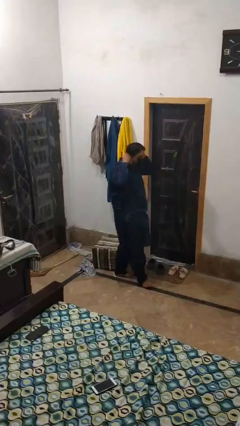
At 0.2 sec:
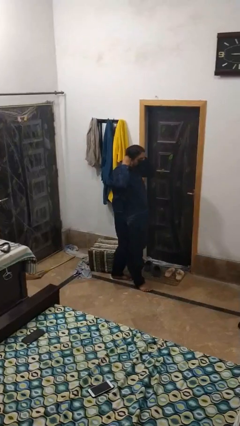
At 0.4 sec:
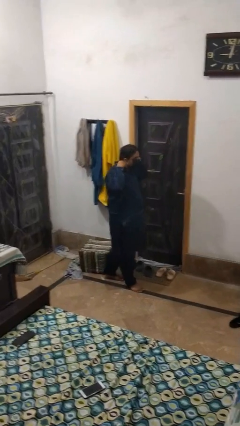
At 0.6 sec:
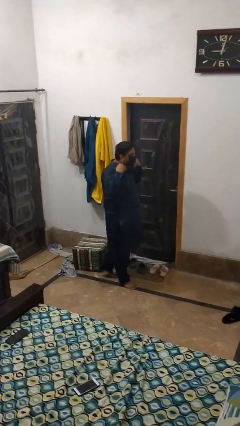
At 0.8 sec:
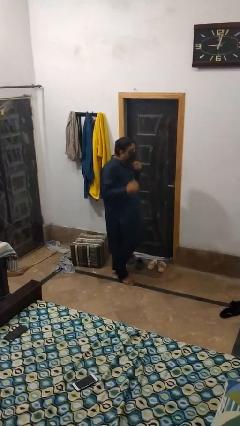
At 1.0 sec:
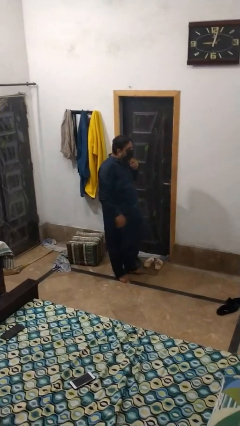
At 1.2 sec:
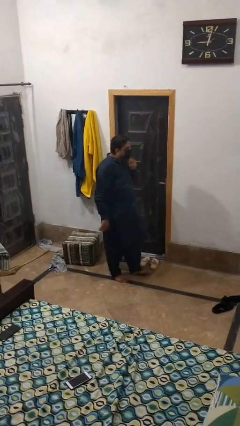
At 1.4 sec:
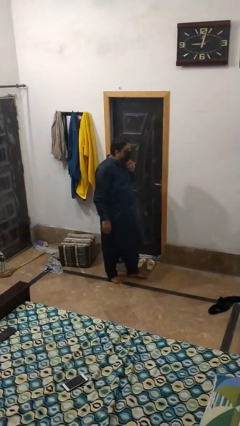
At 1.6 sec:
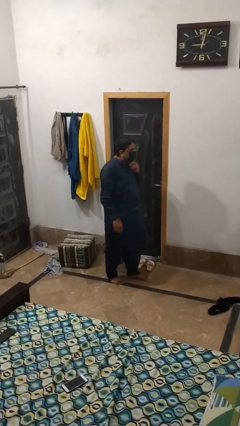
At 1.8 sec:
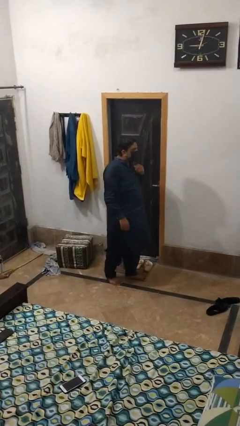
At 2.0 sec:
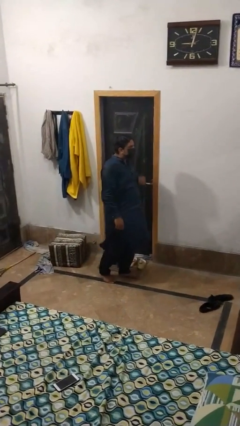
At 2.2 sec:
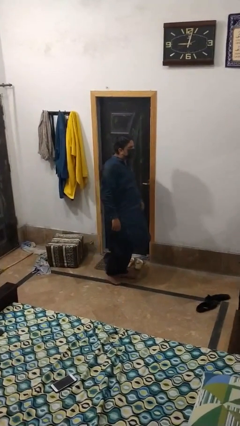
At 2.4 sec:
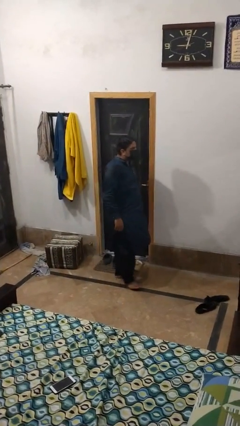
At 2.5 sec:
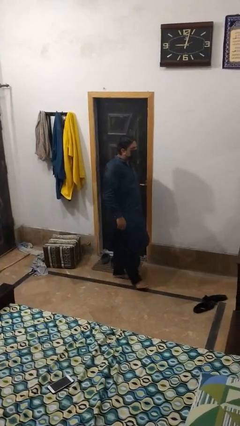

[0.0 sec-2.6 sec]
person puts on facemask

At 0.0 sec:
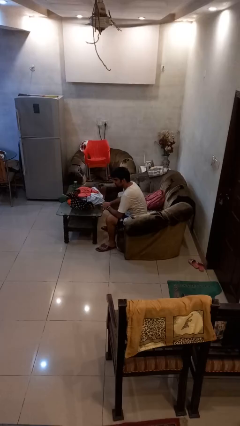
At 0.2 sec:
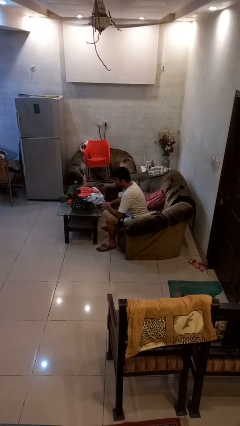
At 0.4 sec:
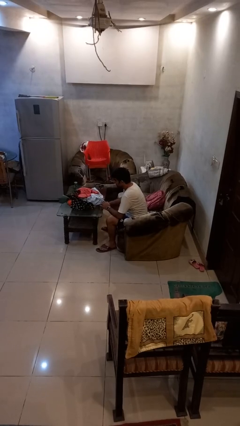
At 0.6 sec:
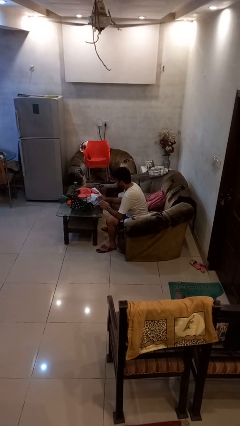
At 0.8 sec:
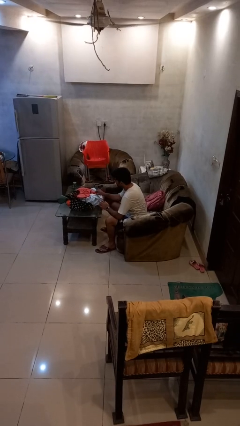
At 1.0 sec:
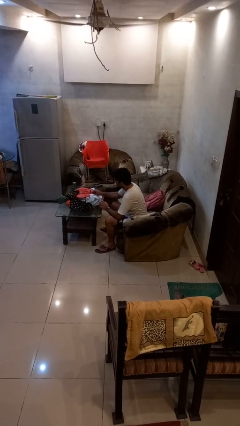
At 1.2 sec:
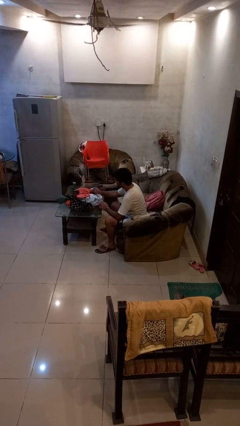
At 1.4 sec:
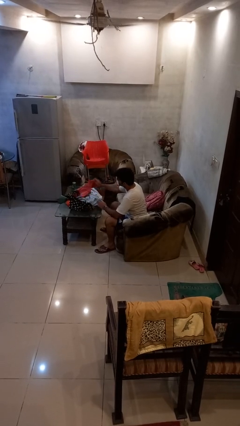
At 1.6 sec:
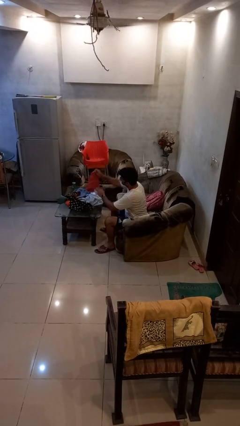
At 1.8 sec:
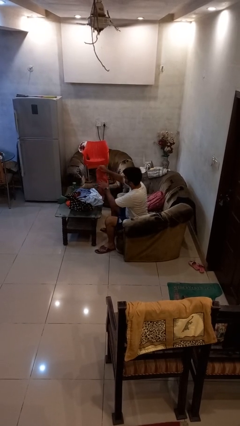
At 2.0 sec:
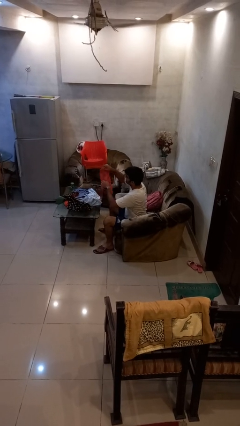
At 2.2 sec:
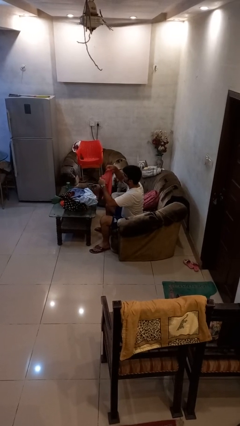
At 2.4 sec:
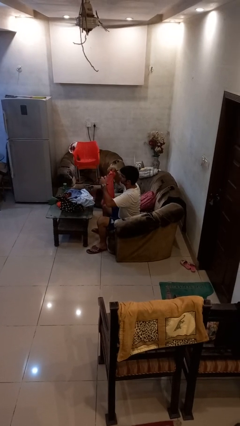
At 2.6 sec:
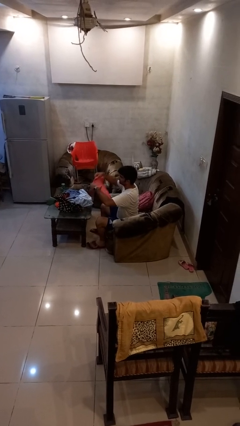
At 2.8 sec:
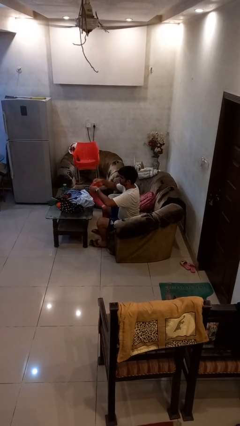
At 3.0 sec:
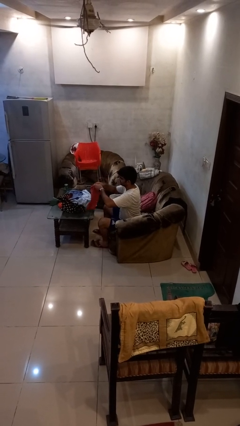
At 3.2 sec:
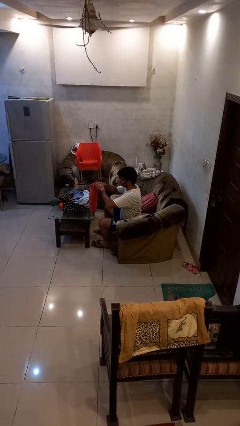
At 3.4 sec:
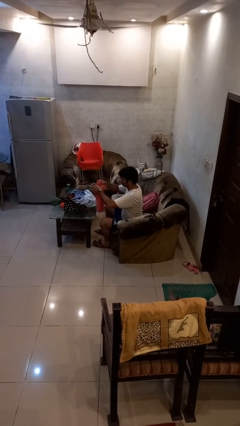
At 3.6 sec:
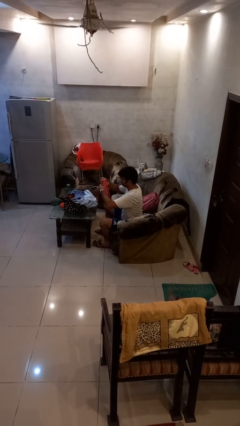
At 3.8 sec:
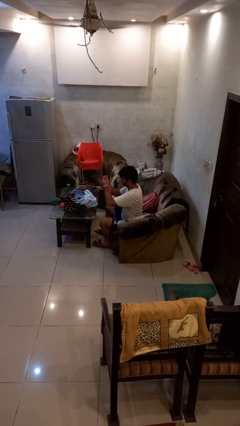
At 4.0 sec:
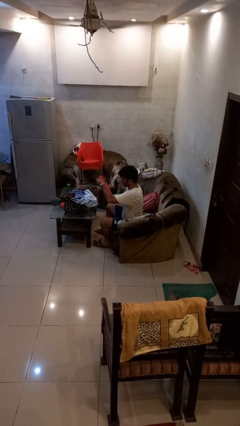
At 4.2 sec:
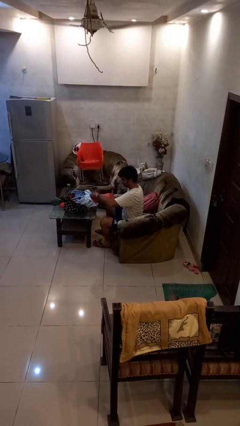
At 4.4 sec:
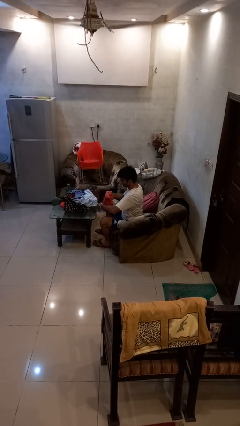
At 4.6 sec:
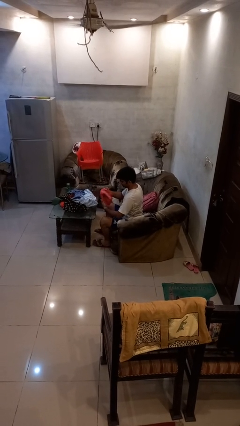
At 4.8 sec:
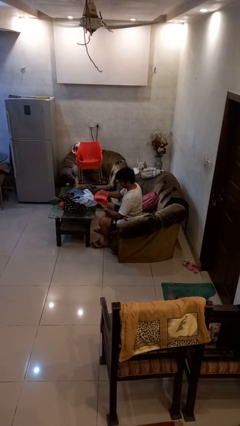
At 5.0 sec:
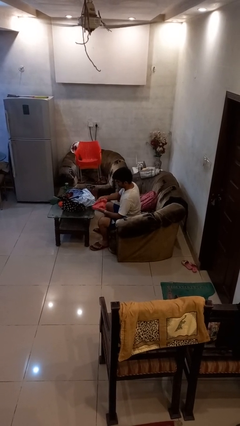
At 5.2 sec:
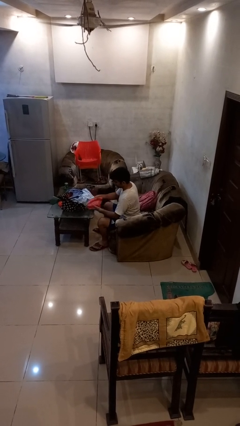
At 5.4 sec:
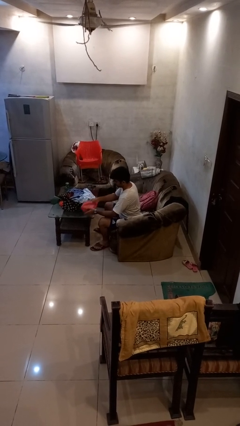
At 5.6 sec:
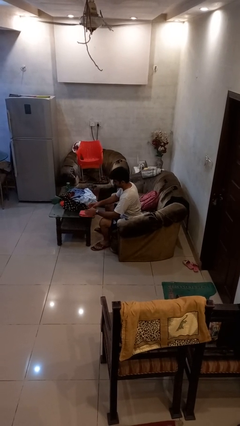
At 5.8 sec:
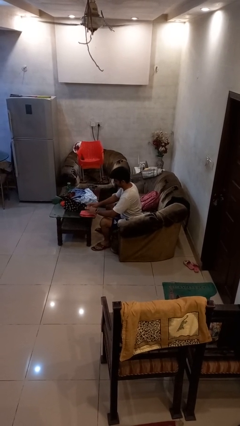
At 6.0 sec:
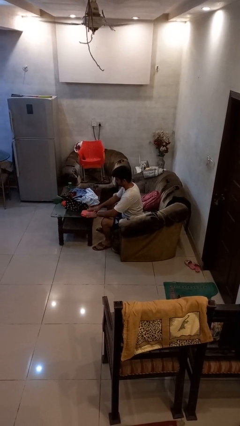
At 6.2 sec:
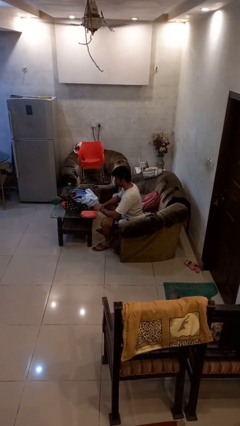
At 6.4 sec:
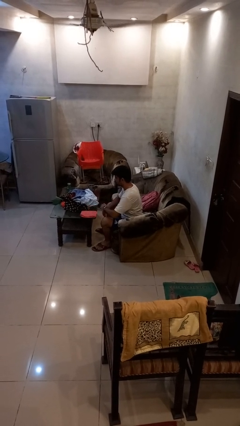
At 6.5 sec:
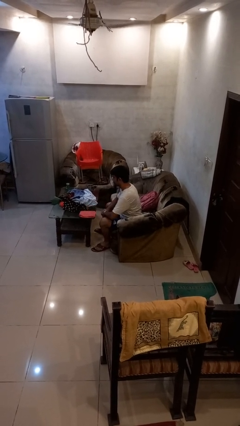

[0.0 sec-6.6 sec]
person folds shirt

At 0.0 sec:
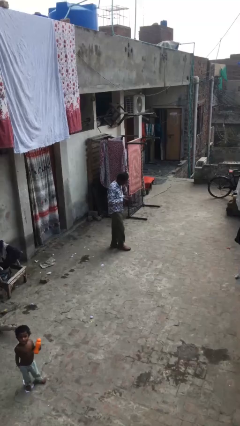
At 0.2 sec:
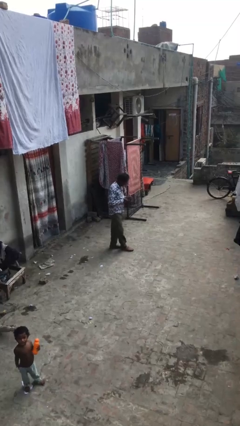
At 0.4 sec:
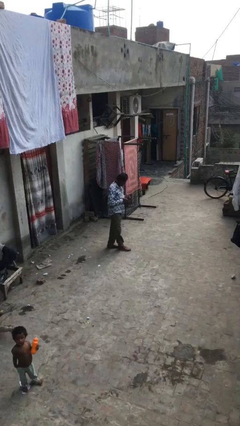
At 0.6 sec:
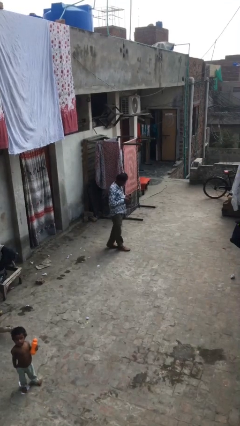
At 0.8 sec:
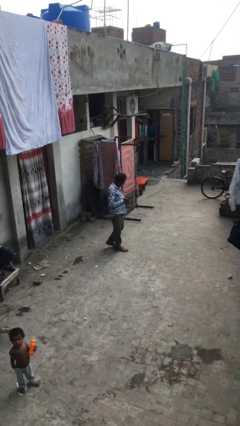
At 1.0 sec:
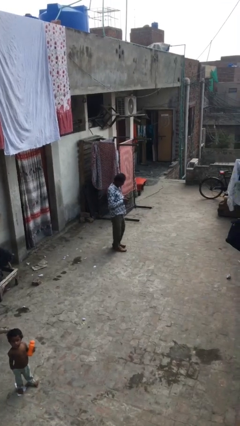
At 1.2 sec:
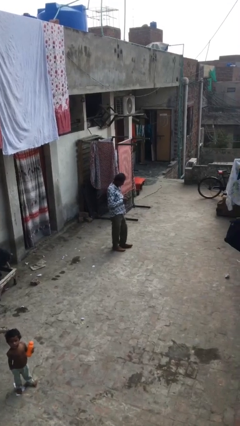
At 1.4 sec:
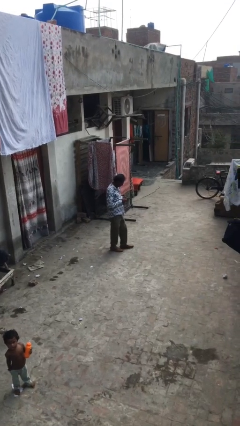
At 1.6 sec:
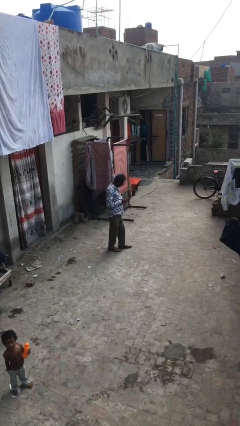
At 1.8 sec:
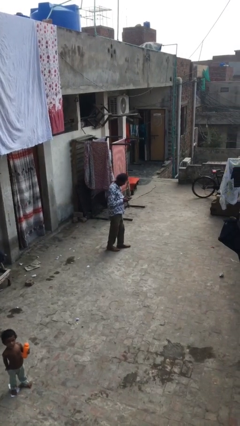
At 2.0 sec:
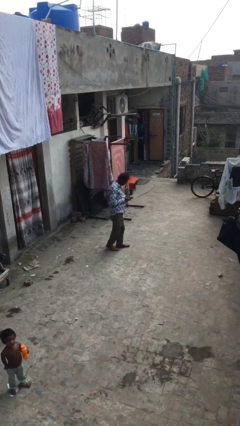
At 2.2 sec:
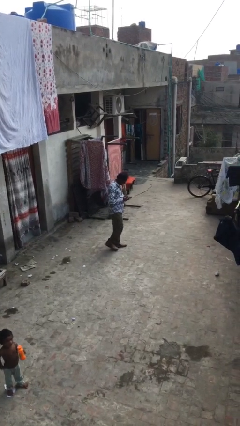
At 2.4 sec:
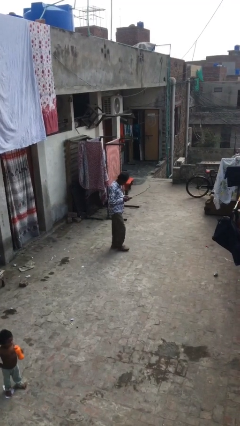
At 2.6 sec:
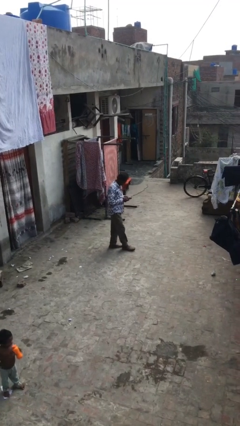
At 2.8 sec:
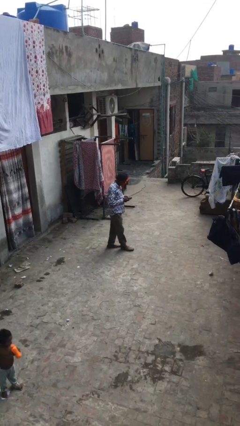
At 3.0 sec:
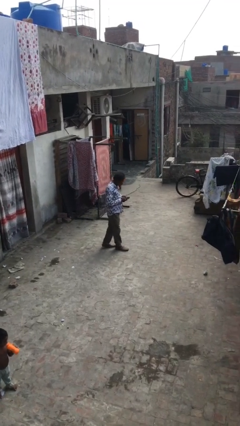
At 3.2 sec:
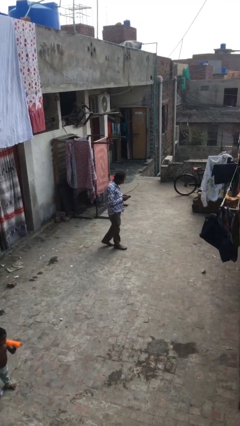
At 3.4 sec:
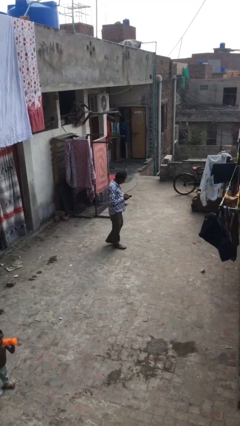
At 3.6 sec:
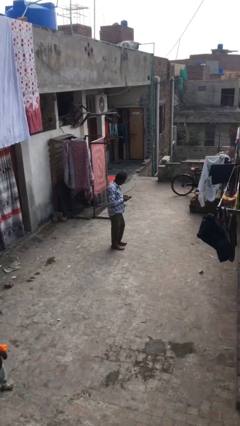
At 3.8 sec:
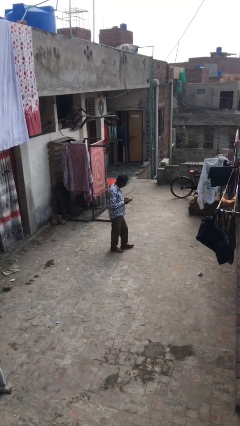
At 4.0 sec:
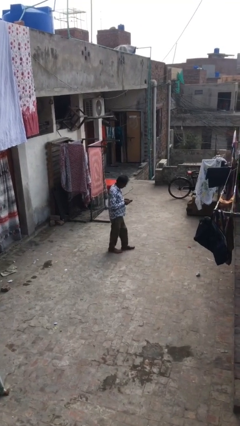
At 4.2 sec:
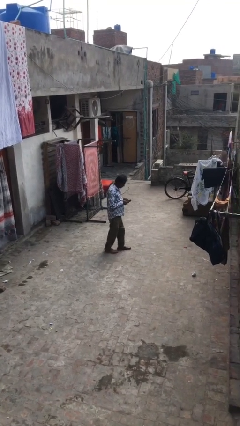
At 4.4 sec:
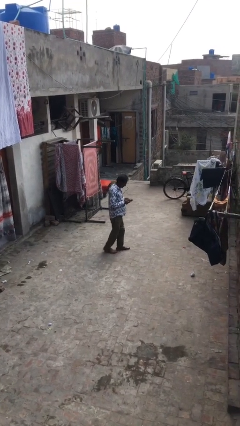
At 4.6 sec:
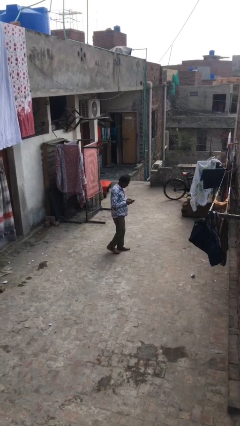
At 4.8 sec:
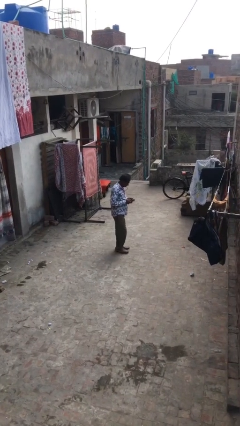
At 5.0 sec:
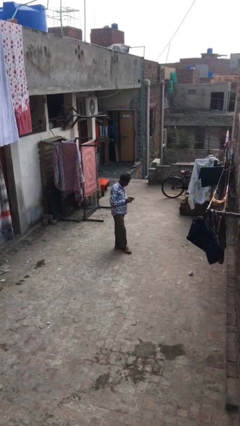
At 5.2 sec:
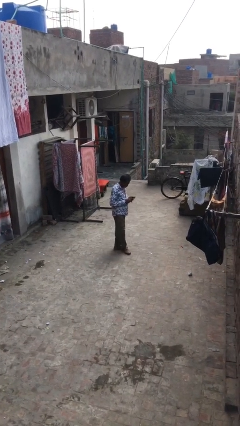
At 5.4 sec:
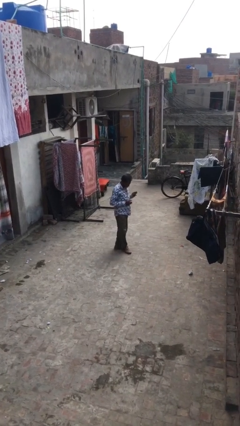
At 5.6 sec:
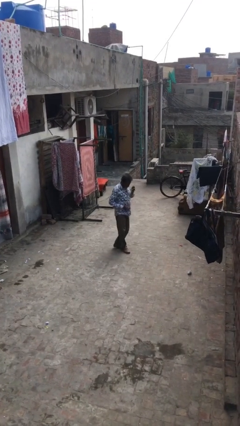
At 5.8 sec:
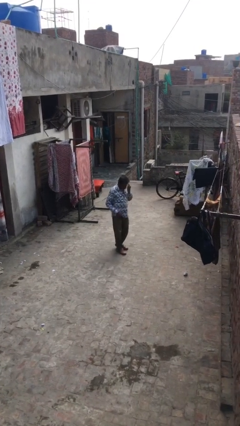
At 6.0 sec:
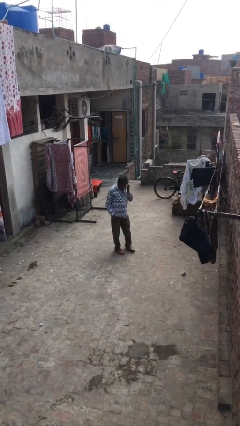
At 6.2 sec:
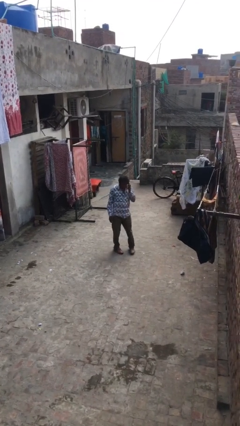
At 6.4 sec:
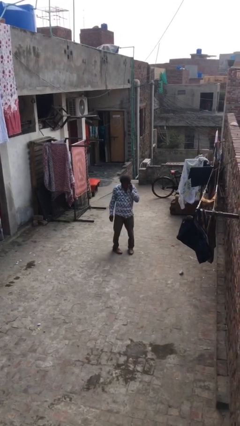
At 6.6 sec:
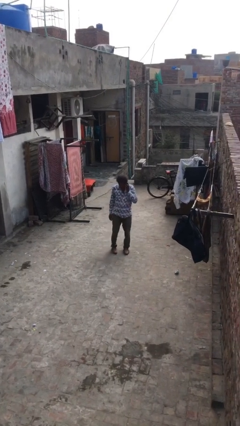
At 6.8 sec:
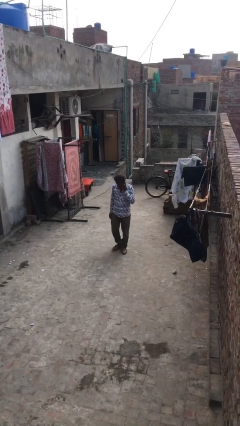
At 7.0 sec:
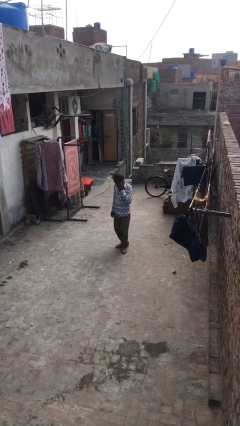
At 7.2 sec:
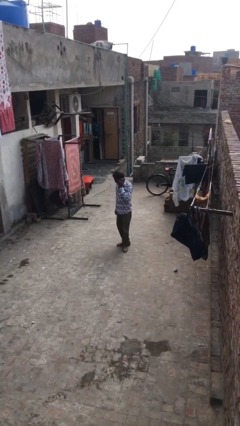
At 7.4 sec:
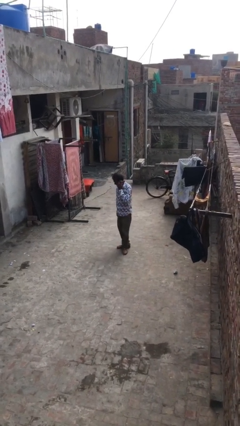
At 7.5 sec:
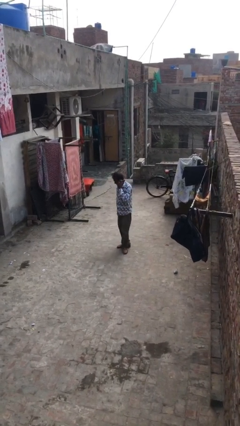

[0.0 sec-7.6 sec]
person texts on phone

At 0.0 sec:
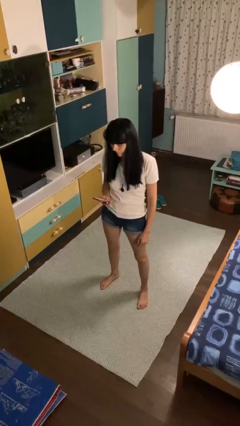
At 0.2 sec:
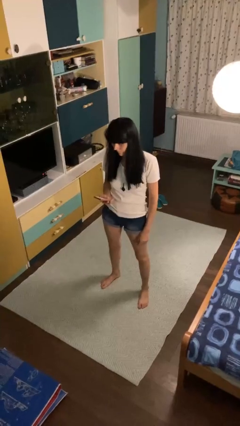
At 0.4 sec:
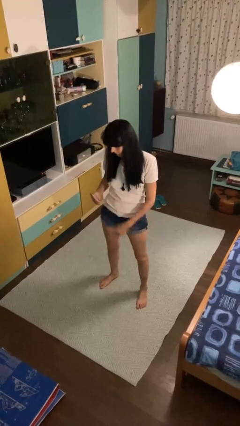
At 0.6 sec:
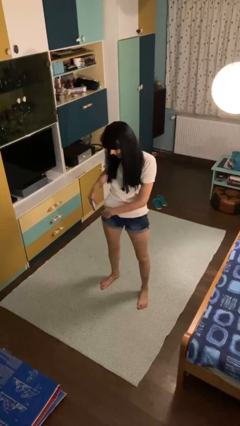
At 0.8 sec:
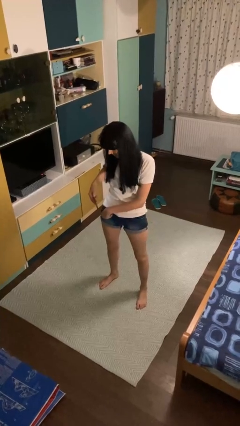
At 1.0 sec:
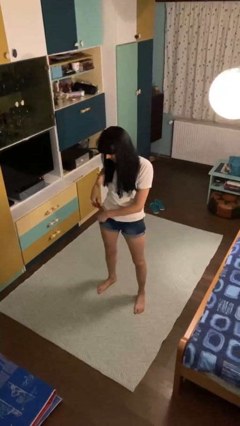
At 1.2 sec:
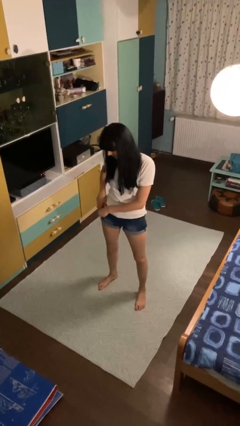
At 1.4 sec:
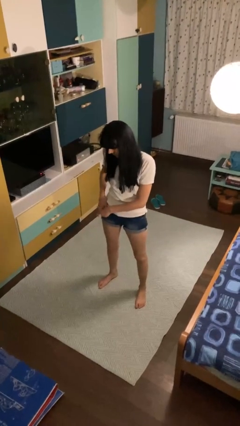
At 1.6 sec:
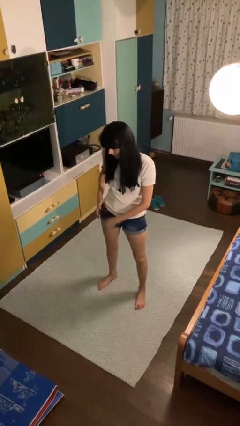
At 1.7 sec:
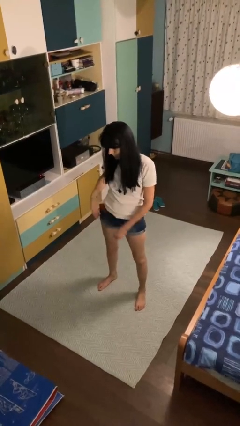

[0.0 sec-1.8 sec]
person puts phone into pocket
